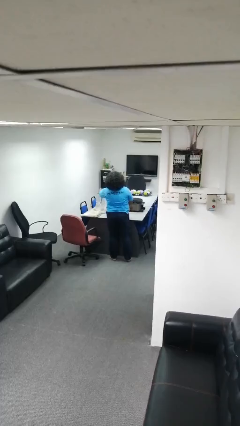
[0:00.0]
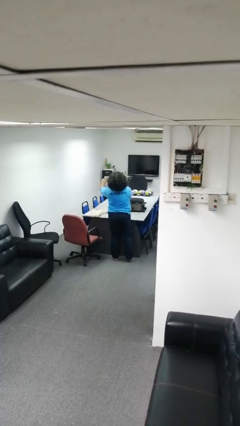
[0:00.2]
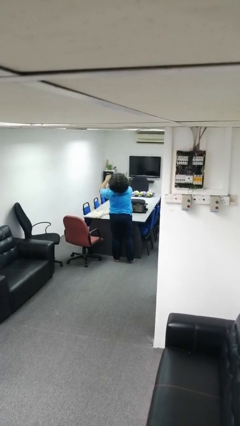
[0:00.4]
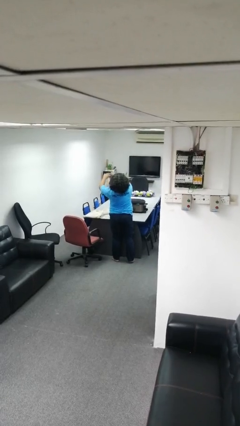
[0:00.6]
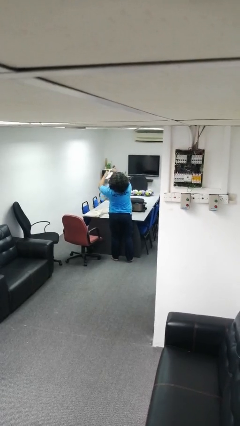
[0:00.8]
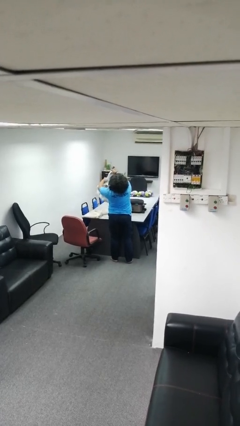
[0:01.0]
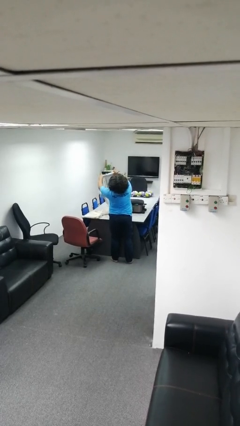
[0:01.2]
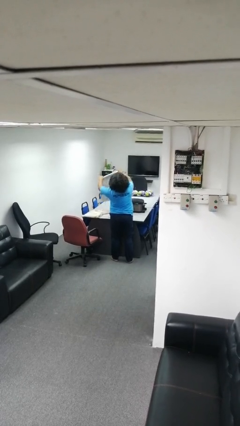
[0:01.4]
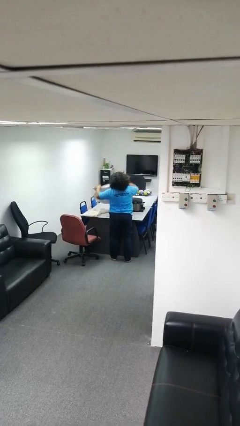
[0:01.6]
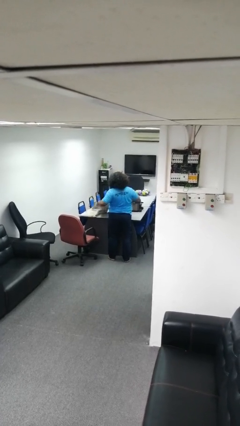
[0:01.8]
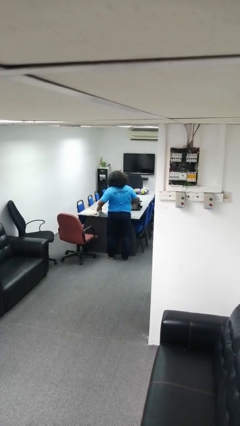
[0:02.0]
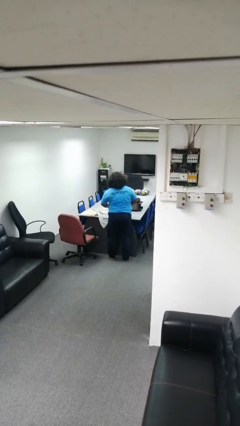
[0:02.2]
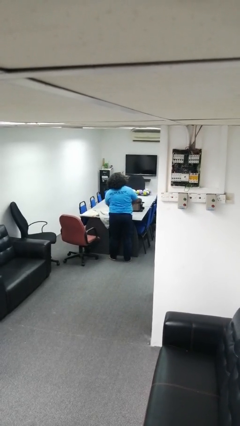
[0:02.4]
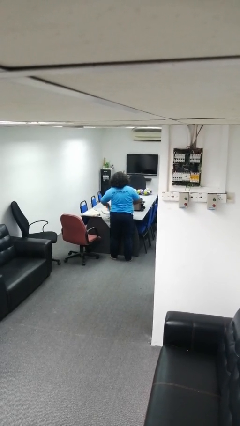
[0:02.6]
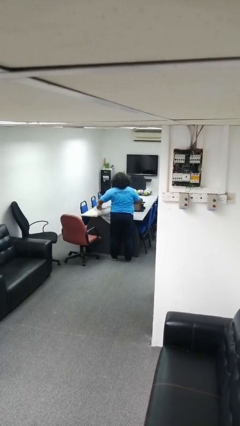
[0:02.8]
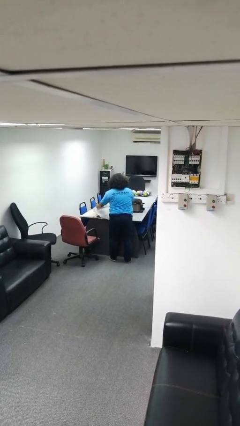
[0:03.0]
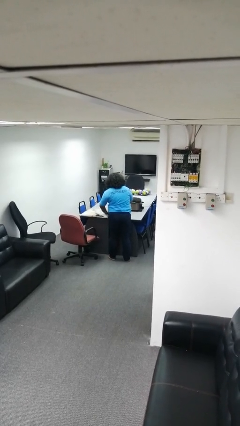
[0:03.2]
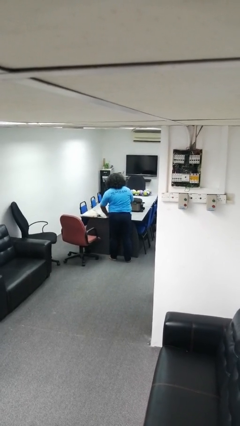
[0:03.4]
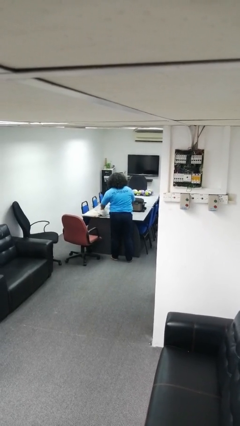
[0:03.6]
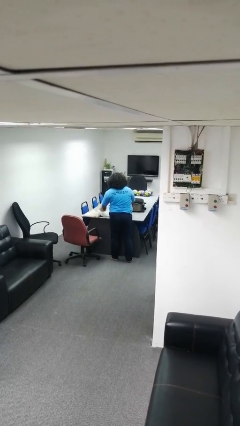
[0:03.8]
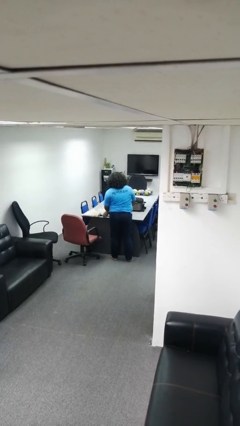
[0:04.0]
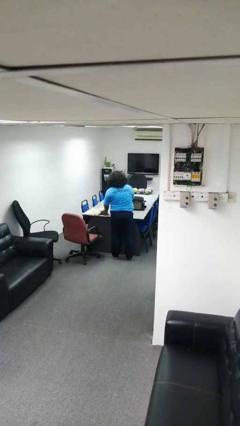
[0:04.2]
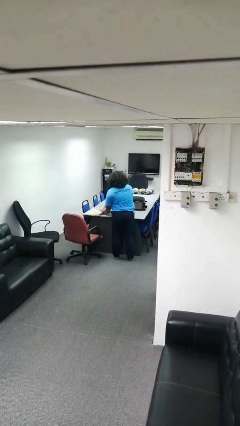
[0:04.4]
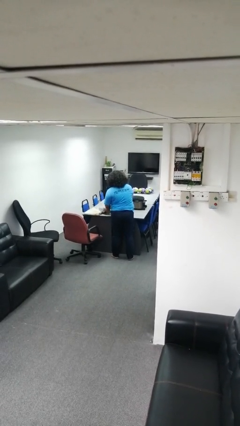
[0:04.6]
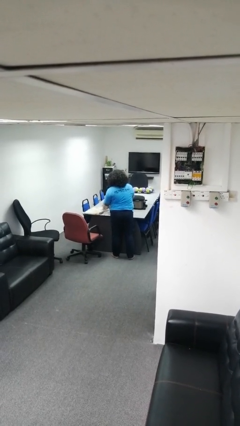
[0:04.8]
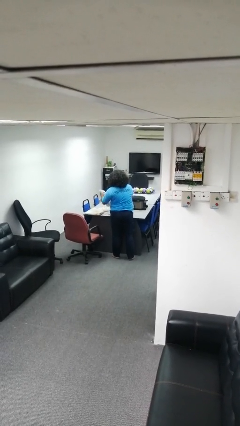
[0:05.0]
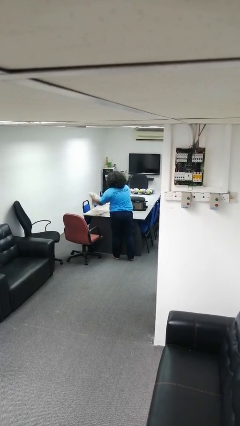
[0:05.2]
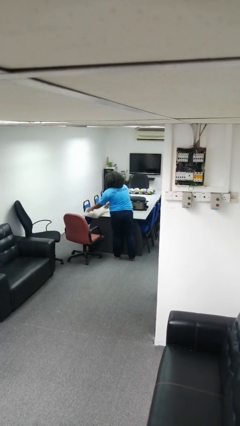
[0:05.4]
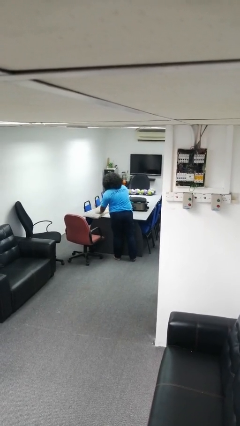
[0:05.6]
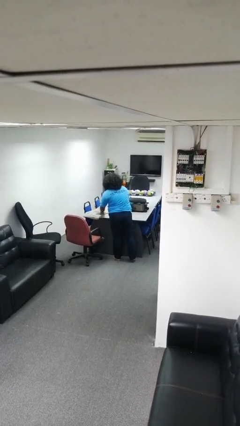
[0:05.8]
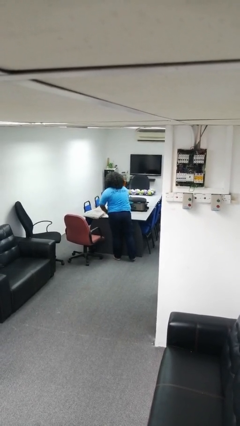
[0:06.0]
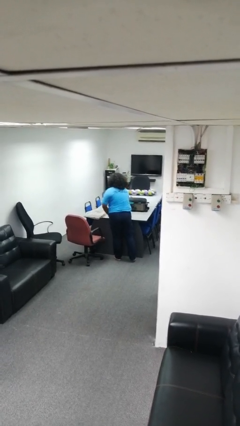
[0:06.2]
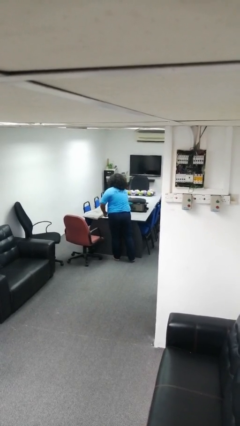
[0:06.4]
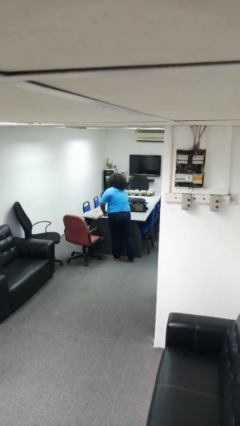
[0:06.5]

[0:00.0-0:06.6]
person folds towel

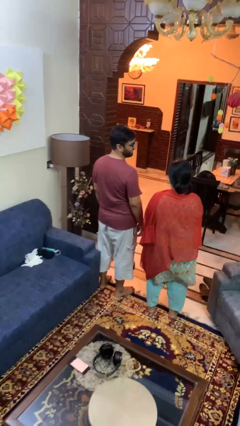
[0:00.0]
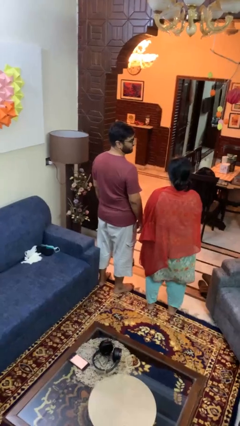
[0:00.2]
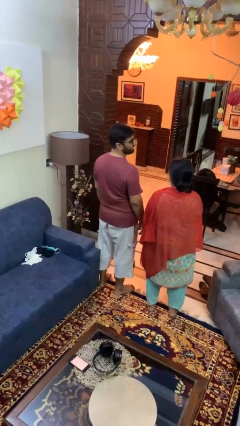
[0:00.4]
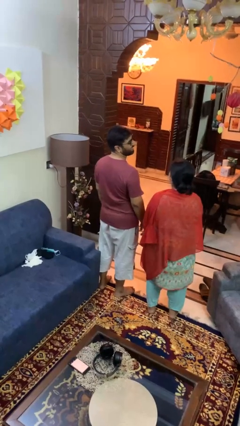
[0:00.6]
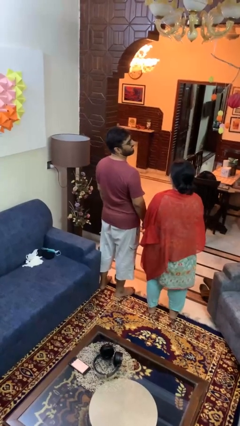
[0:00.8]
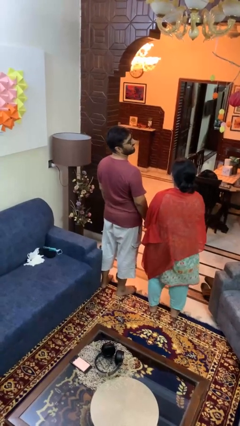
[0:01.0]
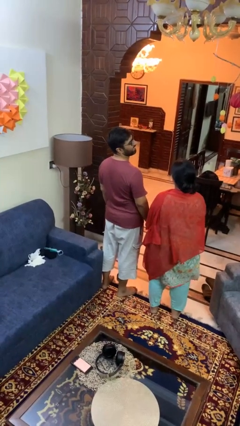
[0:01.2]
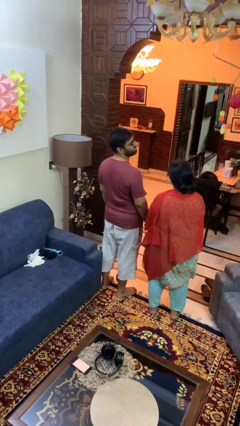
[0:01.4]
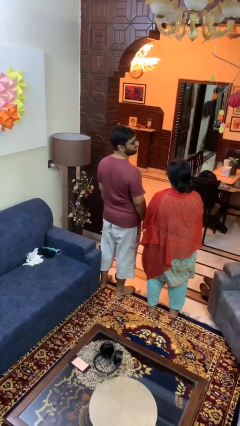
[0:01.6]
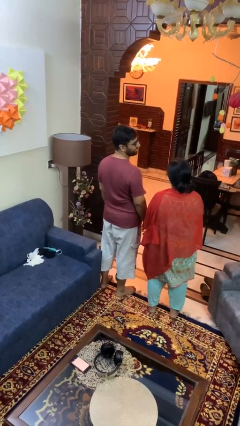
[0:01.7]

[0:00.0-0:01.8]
person laughs with person

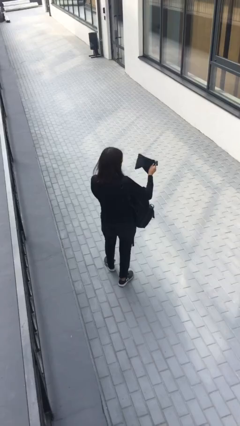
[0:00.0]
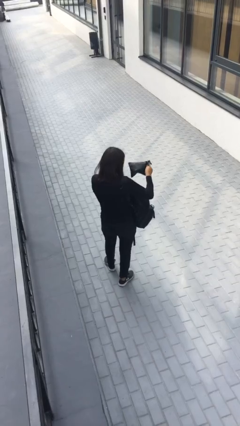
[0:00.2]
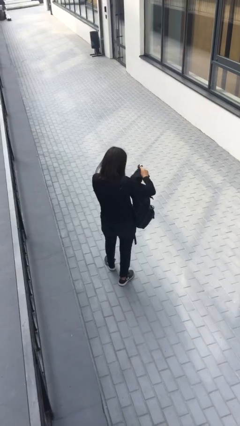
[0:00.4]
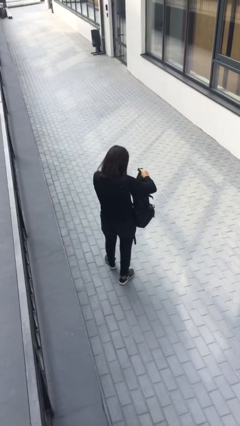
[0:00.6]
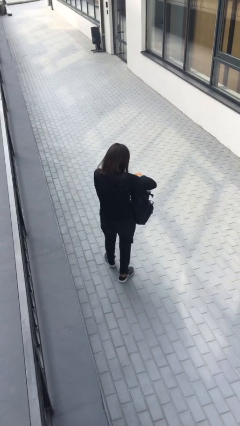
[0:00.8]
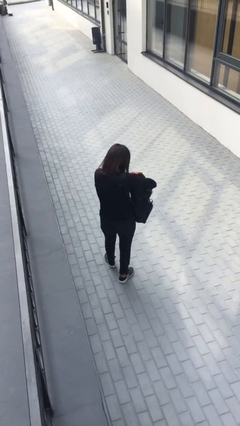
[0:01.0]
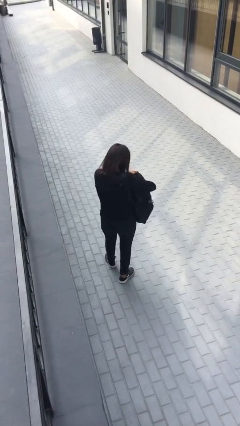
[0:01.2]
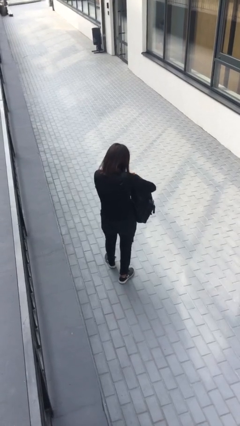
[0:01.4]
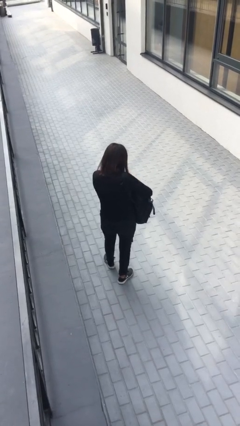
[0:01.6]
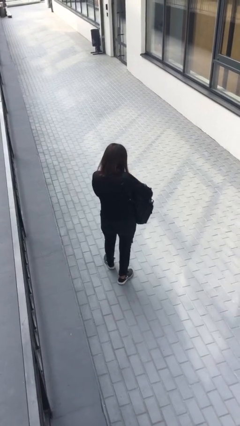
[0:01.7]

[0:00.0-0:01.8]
person puts object into backpack

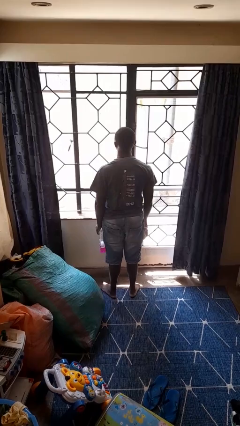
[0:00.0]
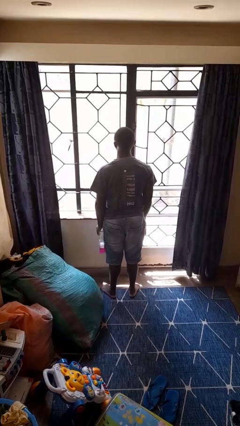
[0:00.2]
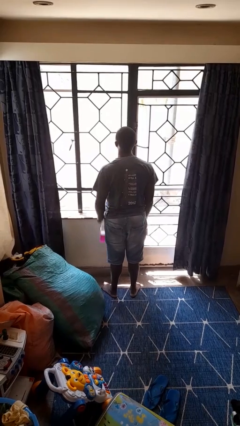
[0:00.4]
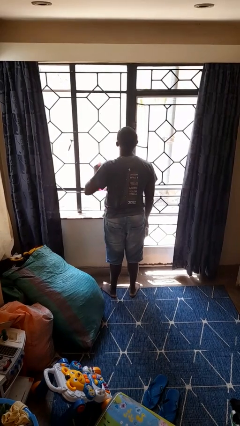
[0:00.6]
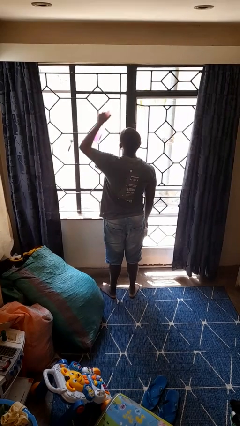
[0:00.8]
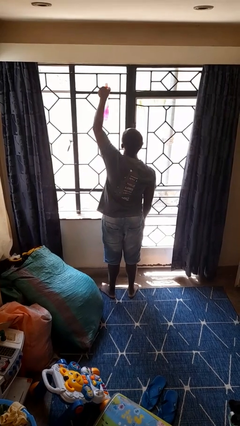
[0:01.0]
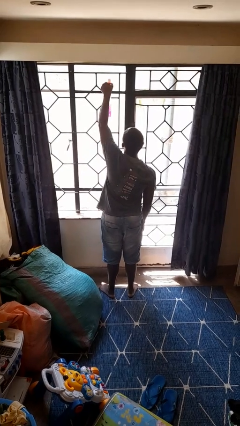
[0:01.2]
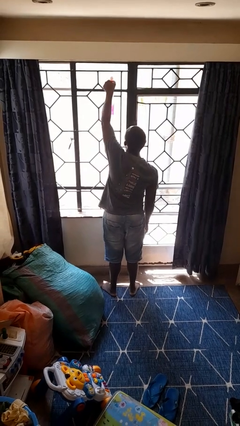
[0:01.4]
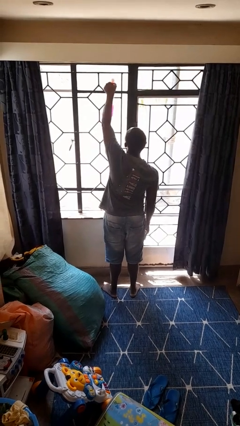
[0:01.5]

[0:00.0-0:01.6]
person sprays from bottle

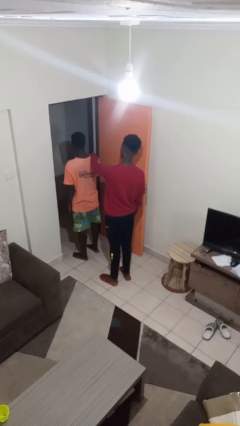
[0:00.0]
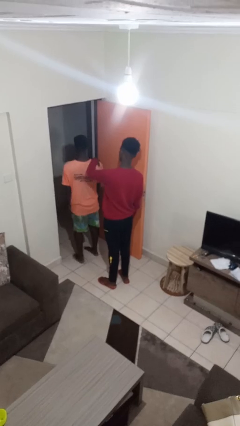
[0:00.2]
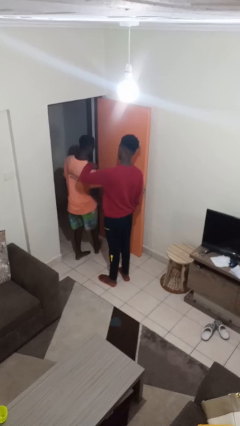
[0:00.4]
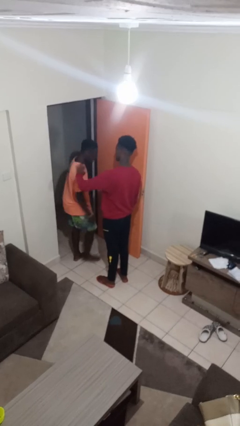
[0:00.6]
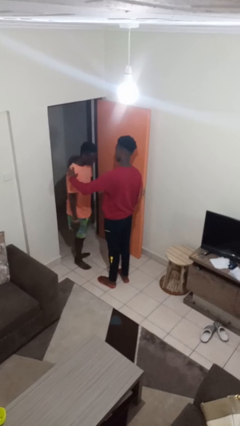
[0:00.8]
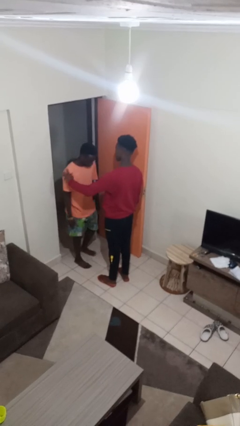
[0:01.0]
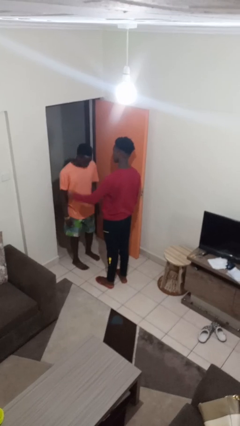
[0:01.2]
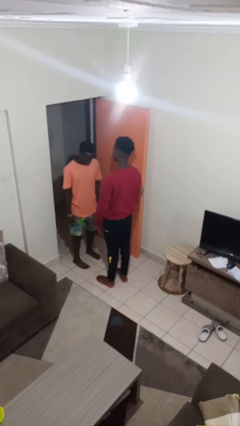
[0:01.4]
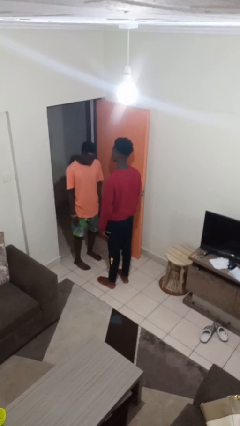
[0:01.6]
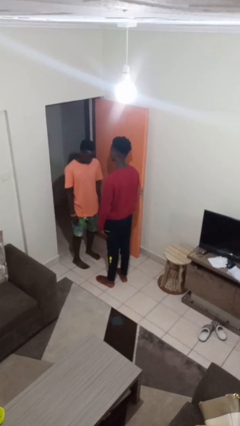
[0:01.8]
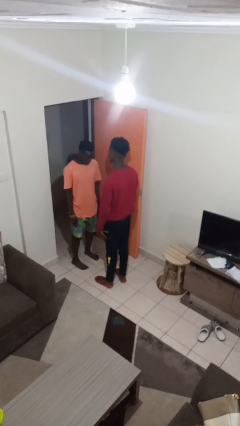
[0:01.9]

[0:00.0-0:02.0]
person spins person around

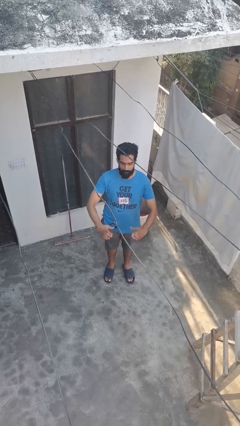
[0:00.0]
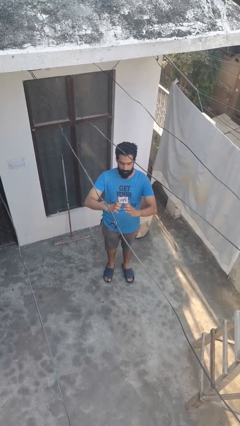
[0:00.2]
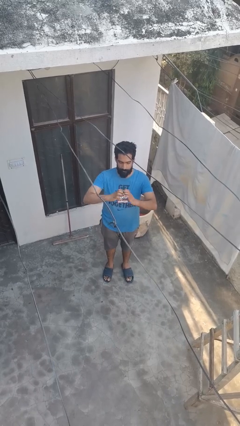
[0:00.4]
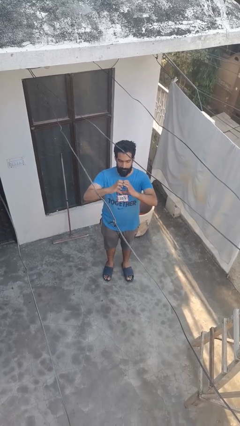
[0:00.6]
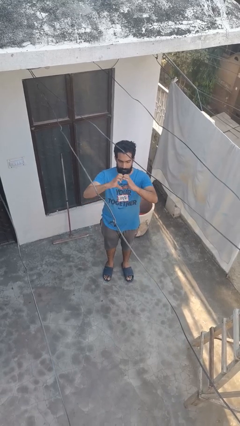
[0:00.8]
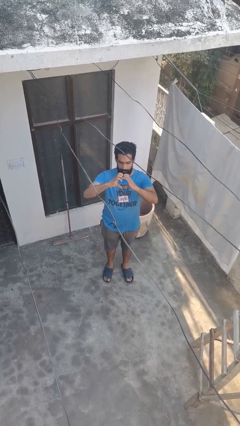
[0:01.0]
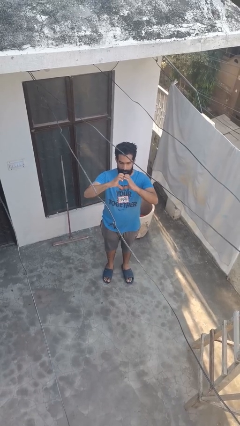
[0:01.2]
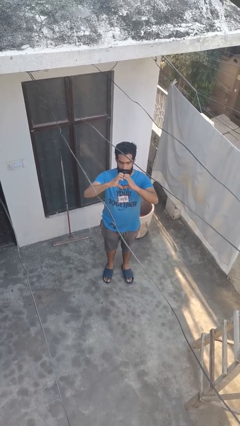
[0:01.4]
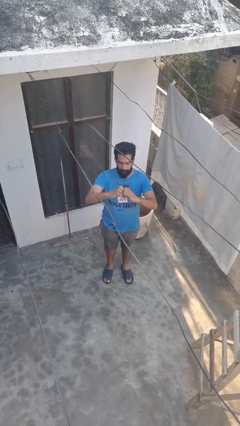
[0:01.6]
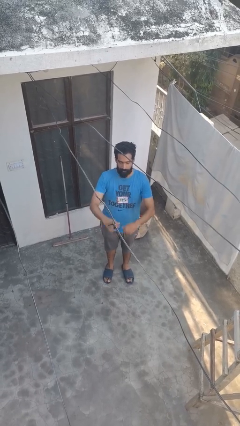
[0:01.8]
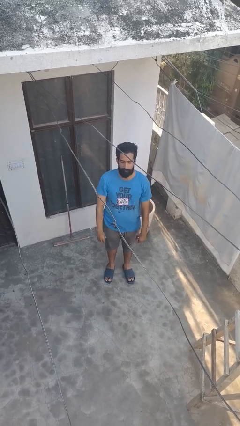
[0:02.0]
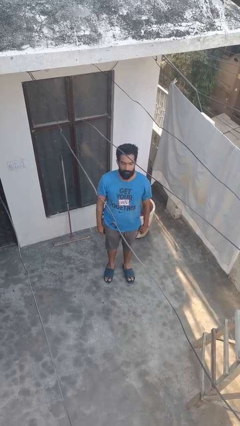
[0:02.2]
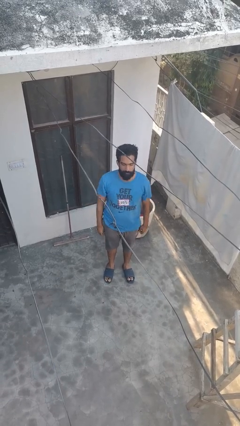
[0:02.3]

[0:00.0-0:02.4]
person gestures heart

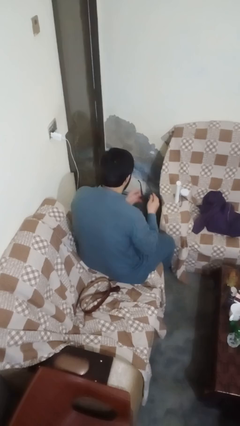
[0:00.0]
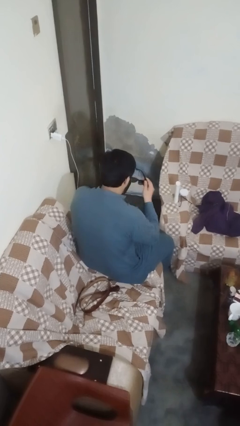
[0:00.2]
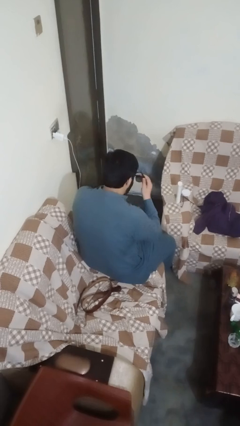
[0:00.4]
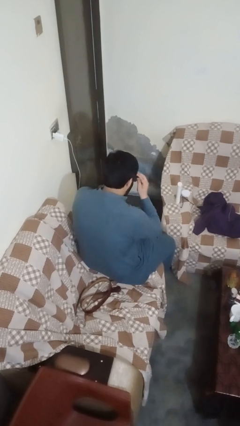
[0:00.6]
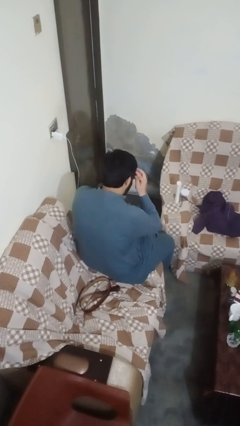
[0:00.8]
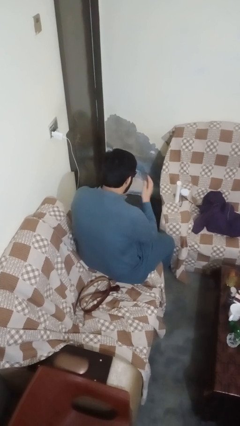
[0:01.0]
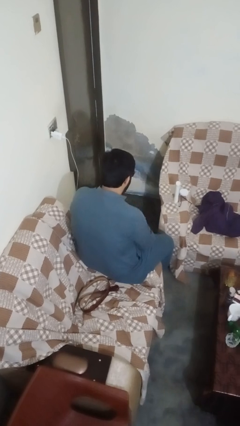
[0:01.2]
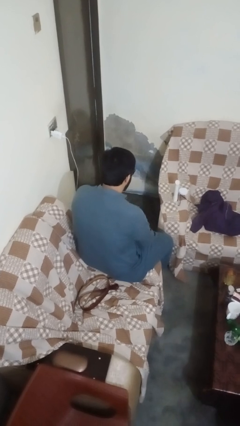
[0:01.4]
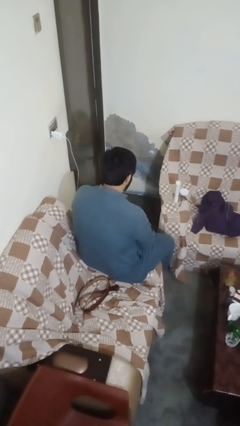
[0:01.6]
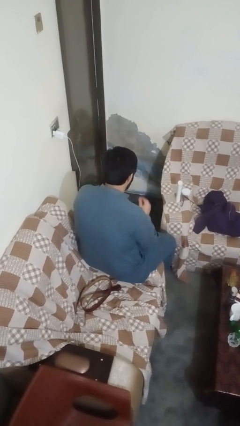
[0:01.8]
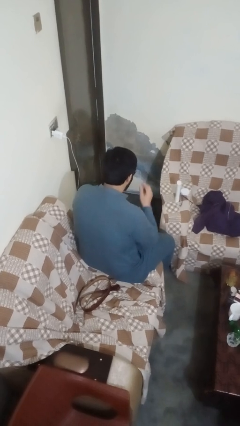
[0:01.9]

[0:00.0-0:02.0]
person puts on sunglasses
